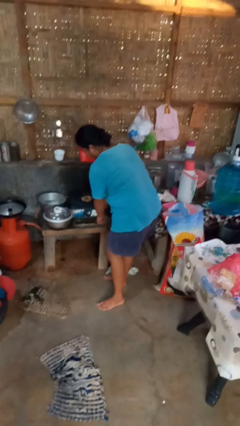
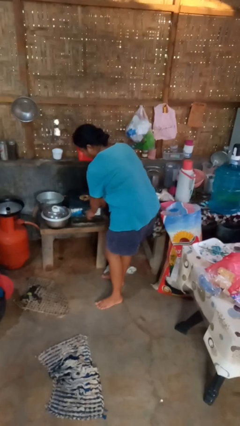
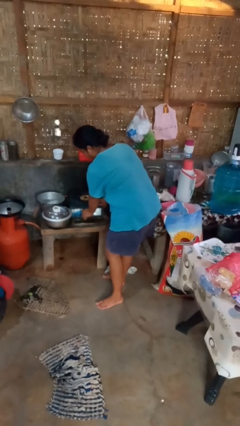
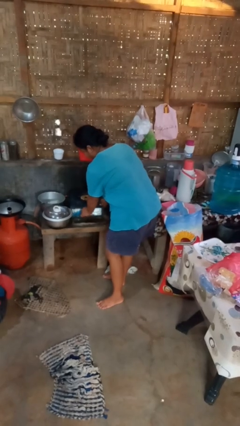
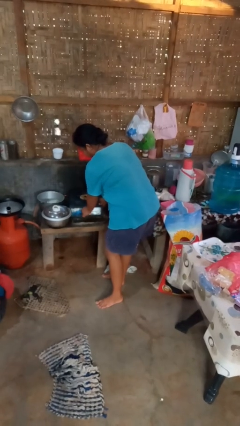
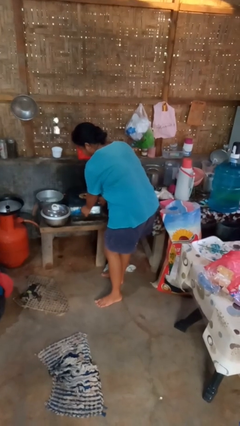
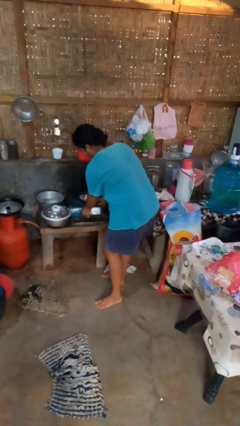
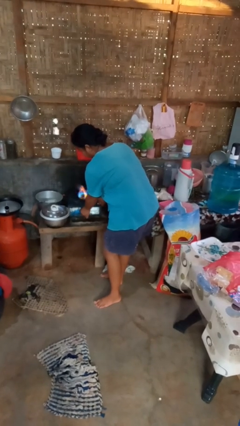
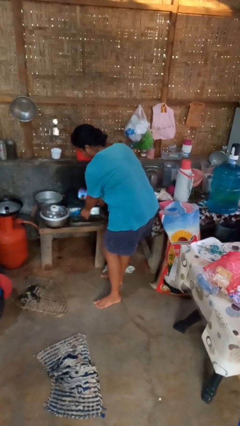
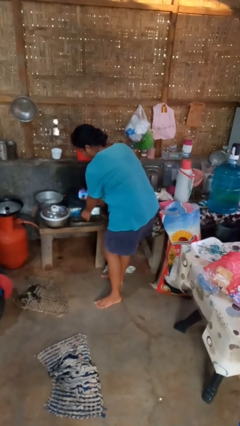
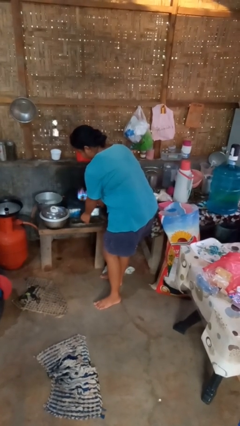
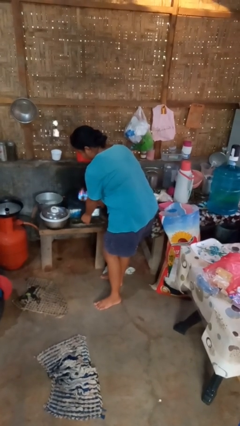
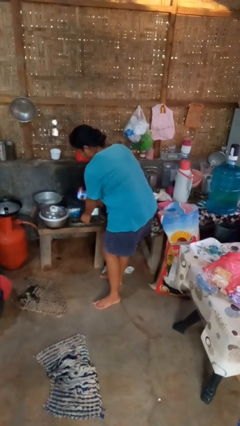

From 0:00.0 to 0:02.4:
person turns on stovetop

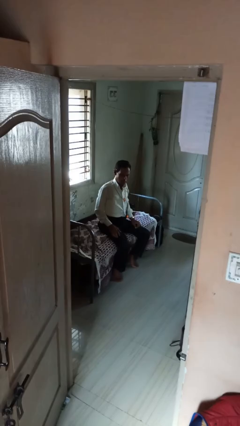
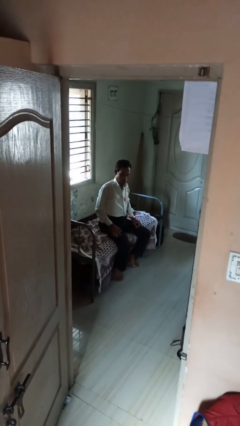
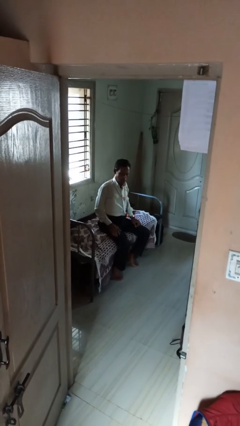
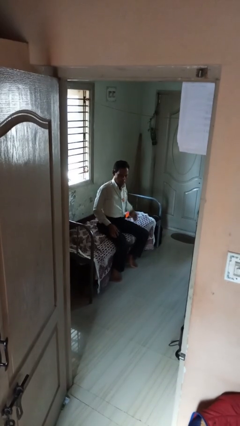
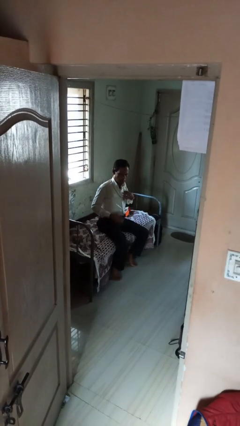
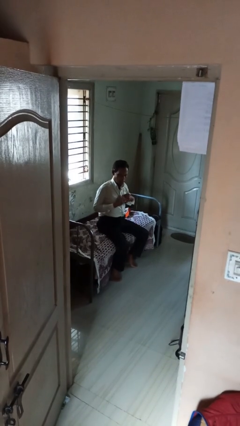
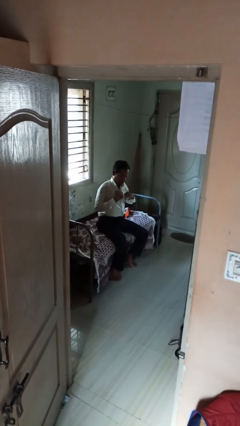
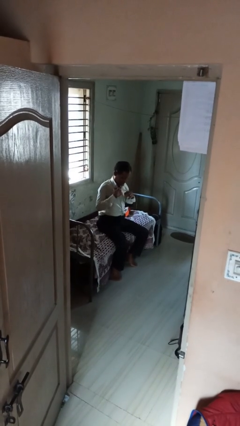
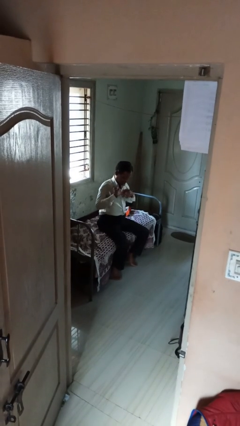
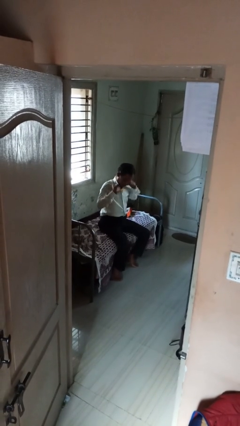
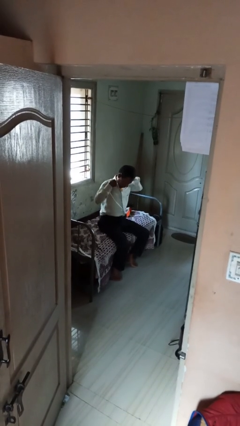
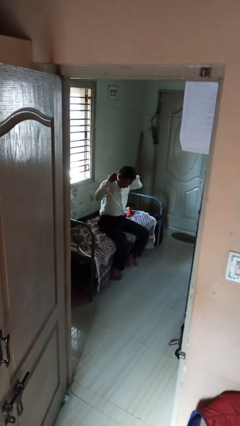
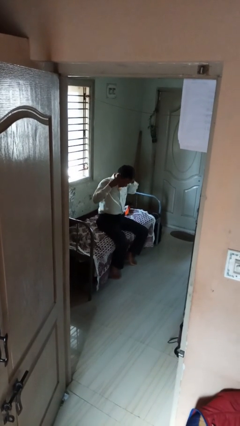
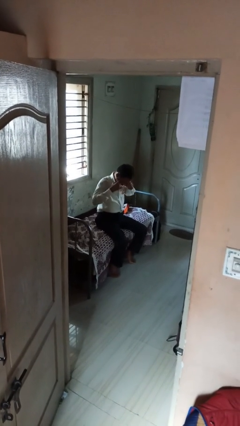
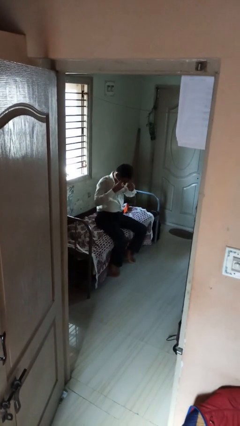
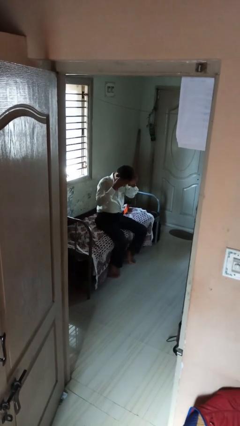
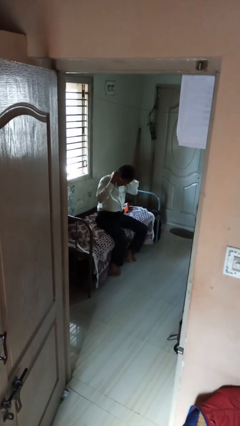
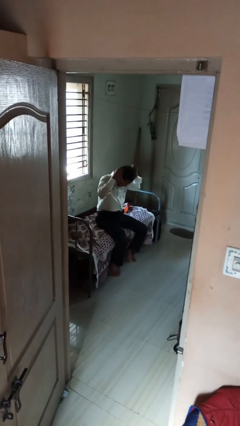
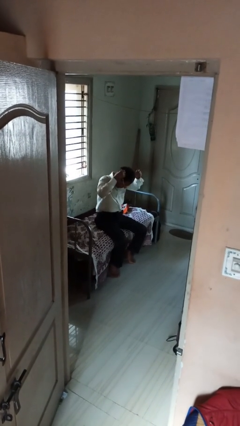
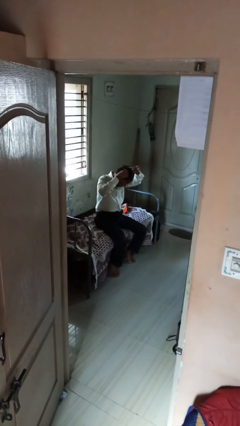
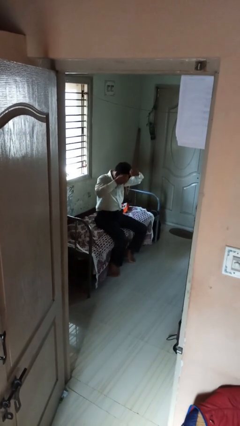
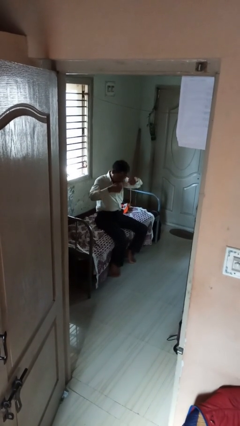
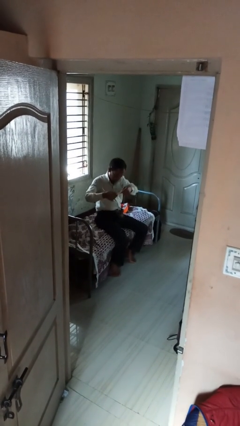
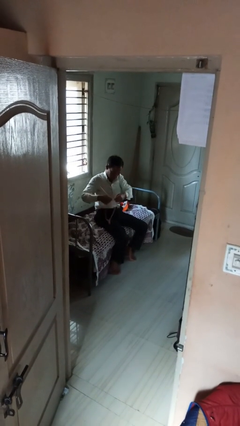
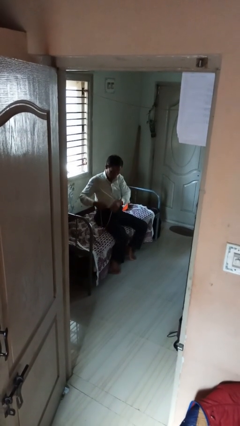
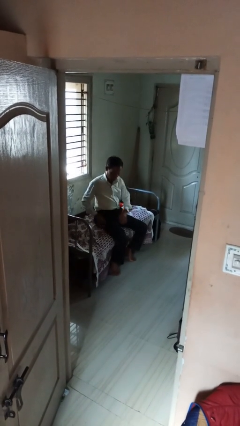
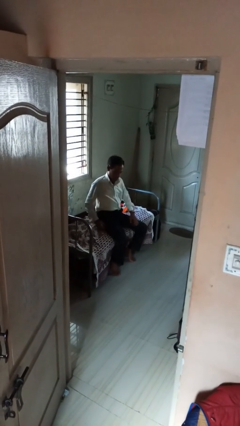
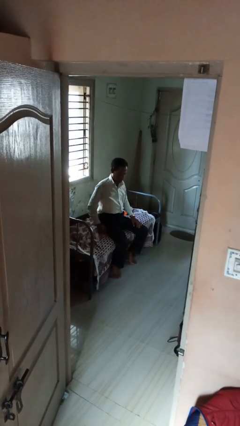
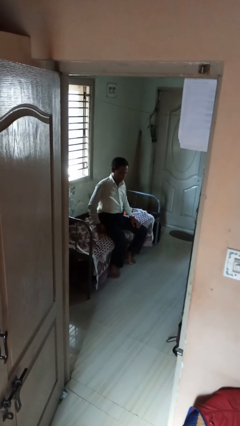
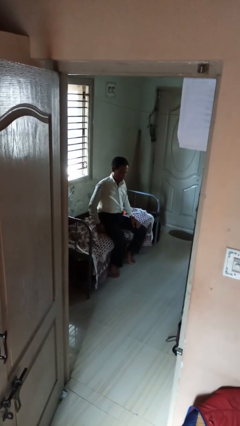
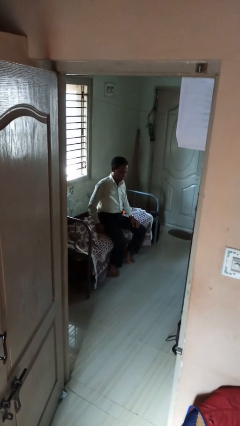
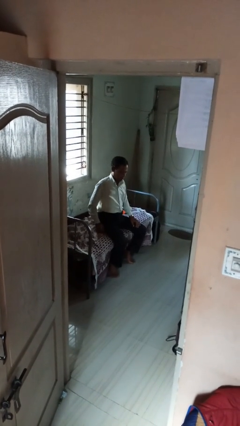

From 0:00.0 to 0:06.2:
person takes off necklace

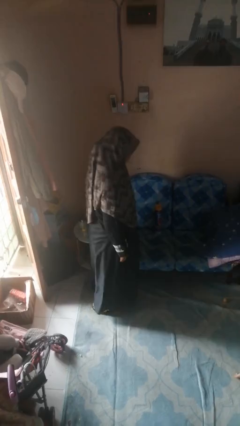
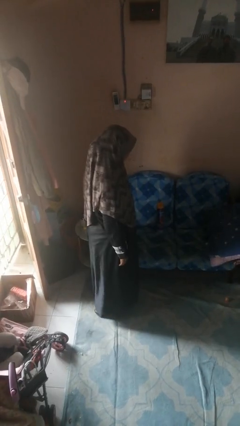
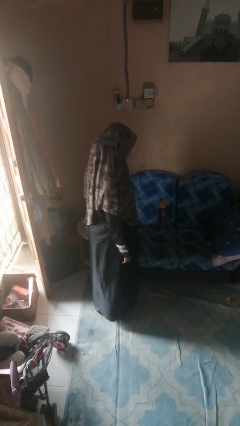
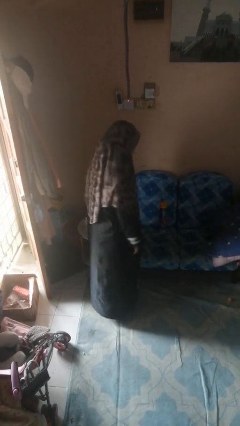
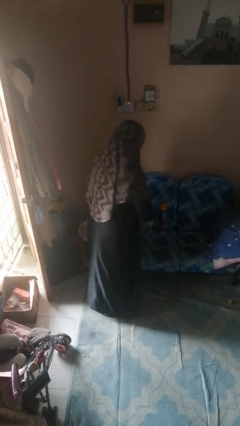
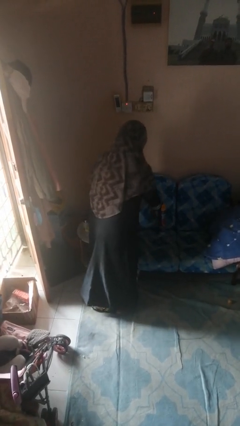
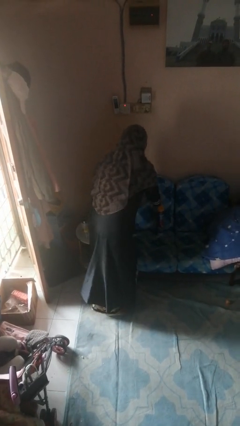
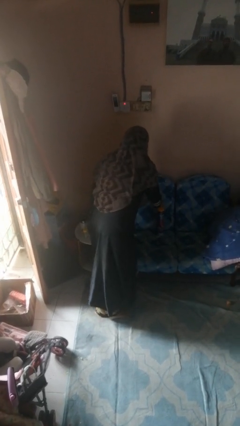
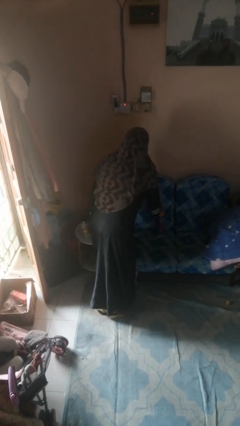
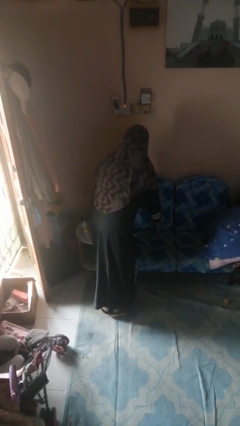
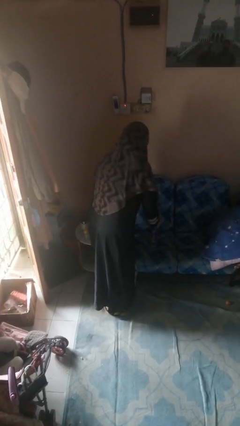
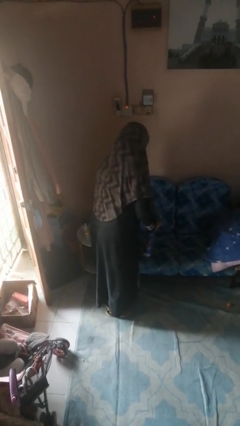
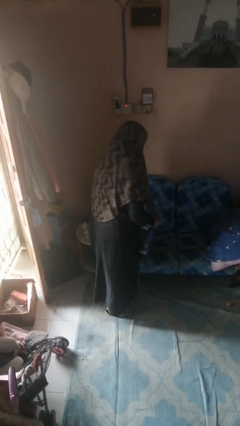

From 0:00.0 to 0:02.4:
person picks up object from couch

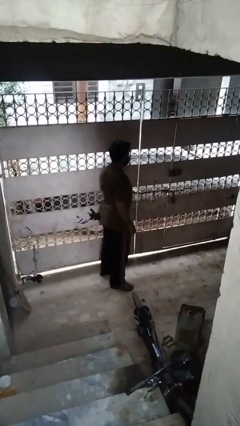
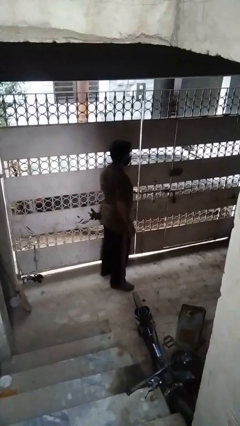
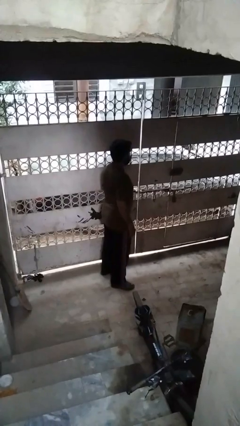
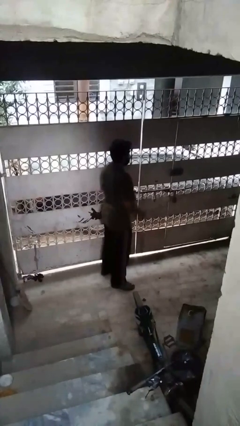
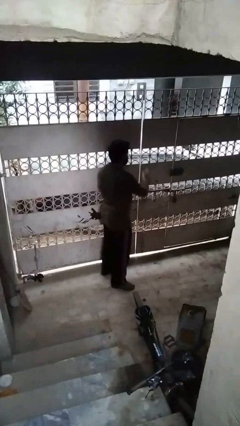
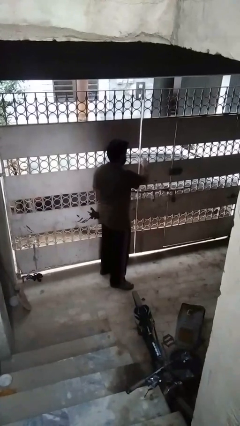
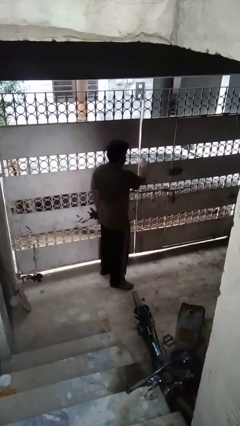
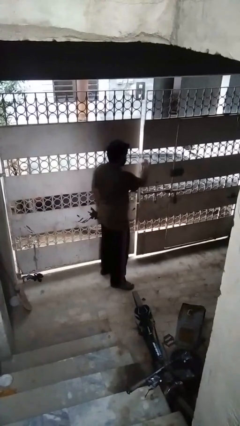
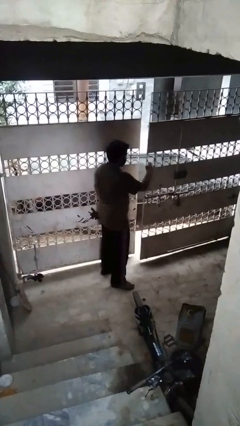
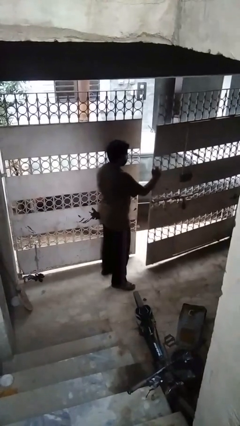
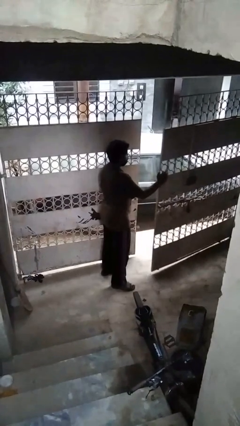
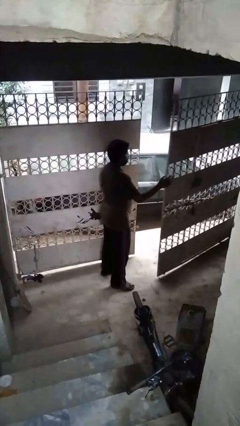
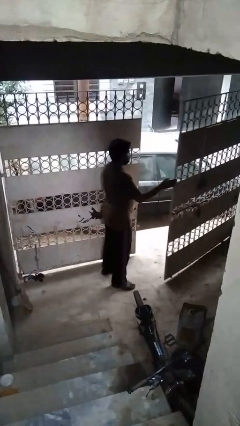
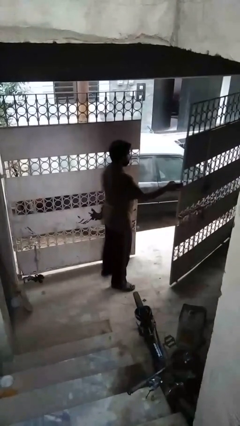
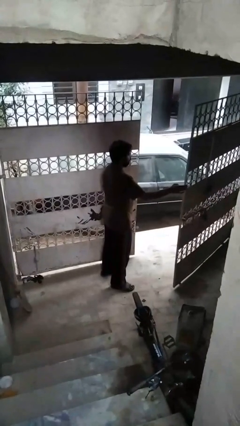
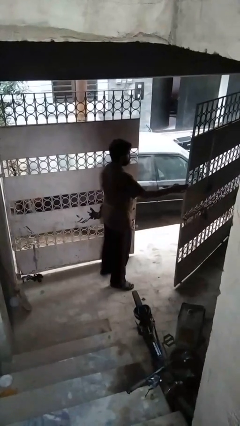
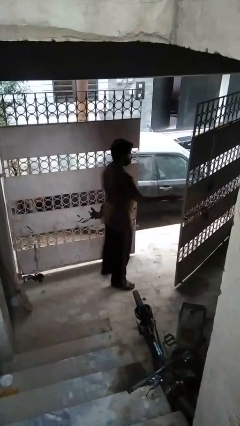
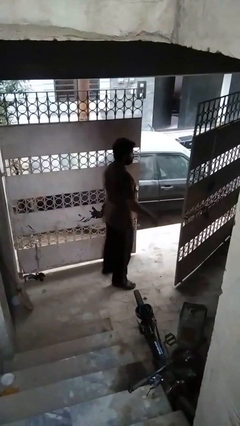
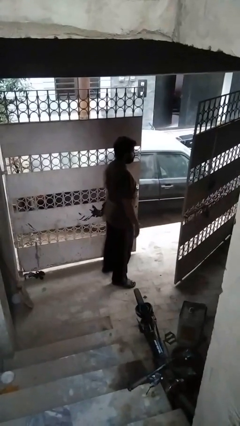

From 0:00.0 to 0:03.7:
person opens gate

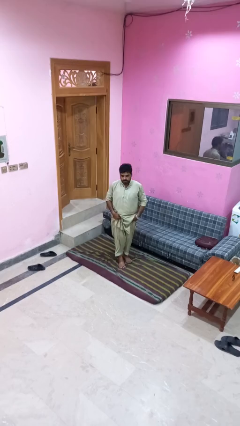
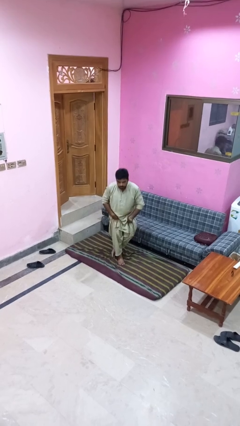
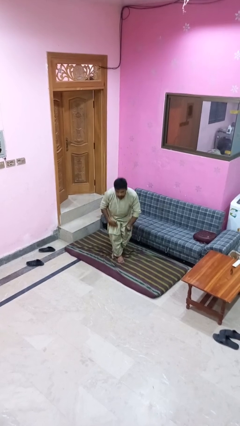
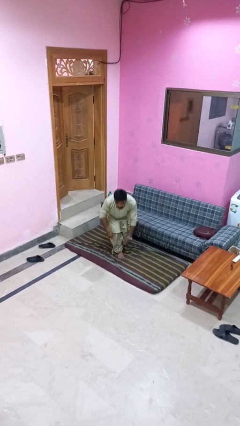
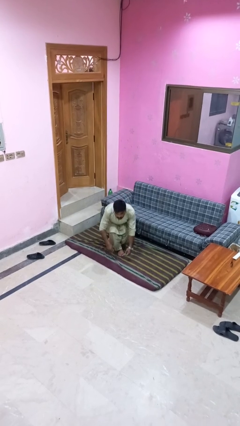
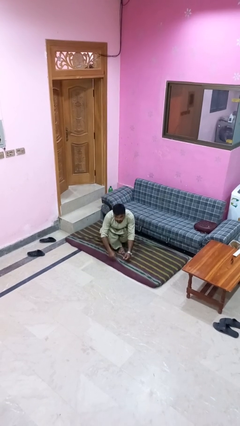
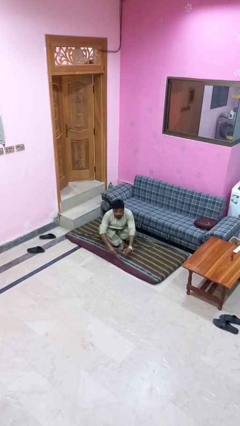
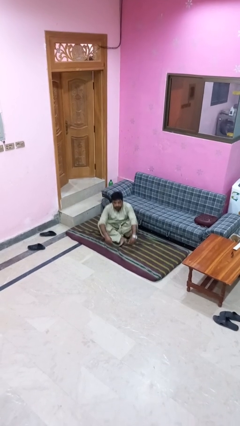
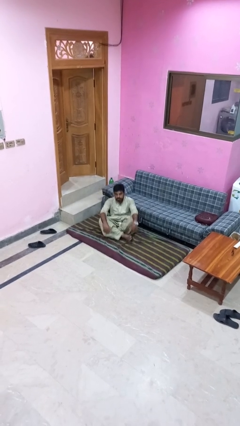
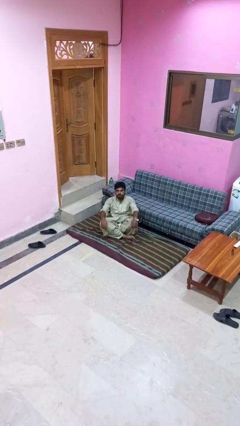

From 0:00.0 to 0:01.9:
person sits crisscross

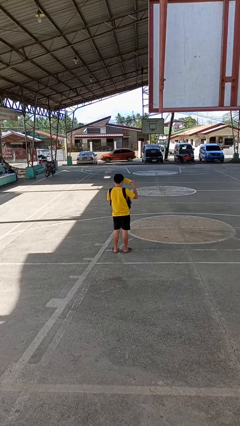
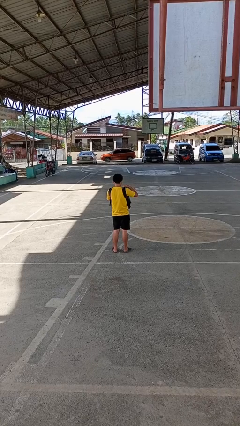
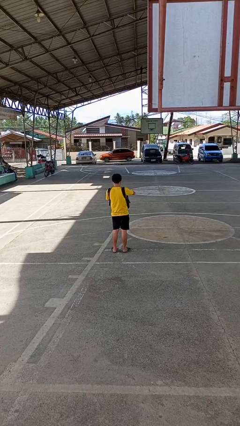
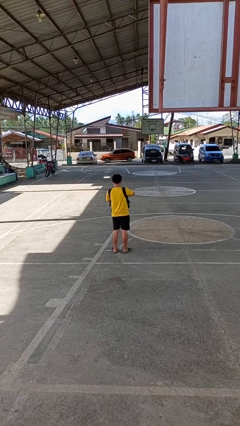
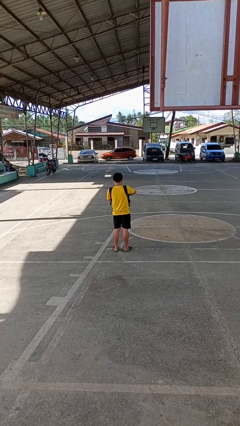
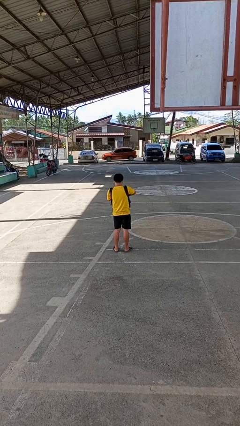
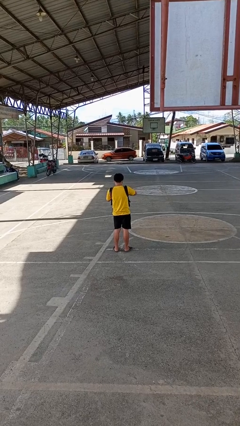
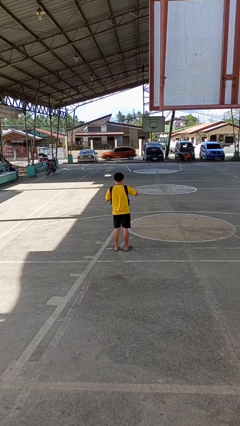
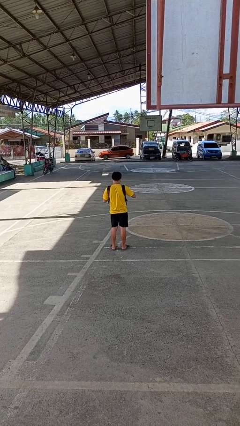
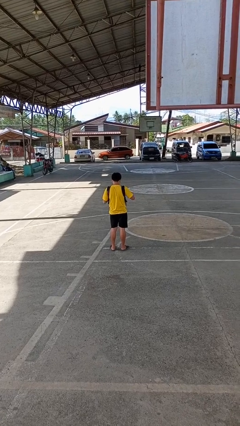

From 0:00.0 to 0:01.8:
person puts object into backpack
